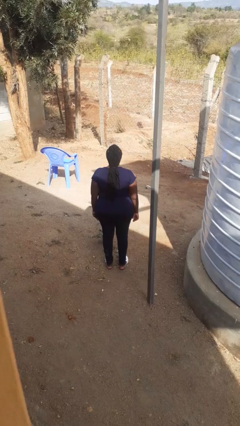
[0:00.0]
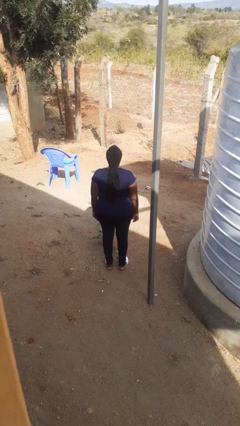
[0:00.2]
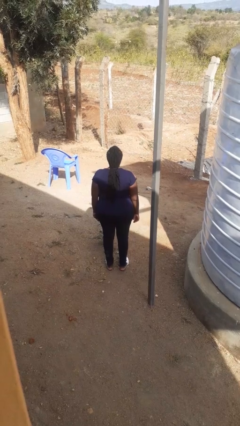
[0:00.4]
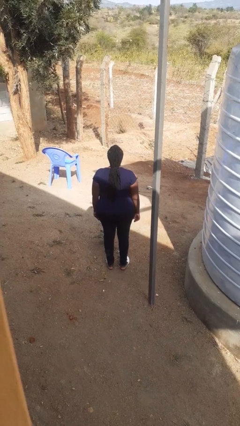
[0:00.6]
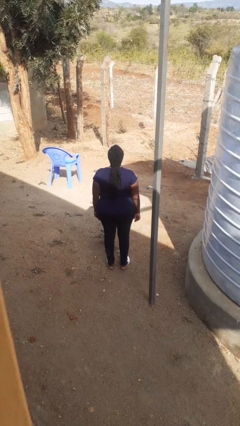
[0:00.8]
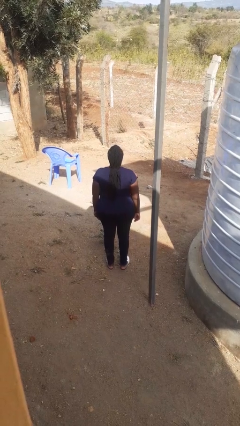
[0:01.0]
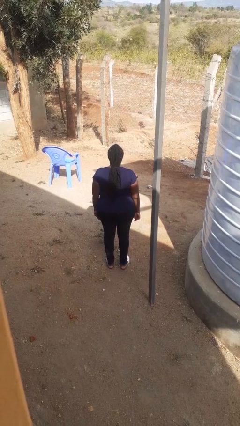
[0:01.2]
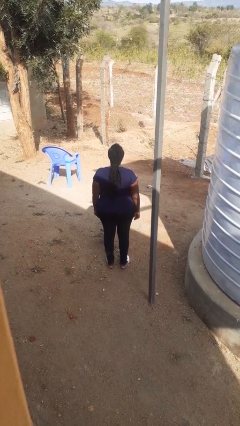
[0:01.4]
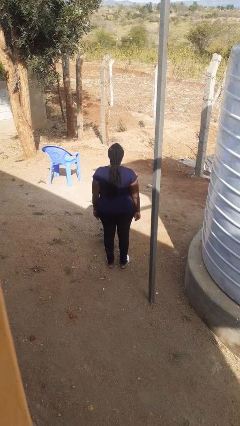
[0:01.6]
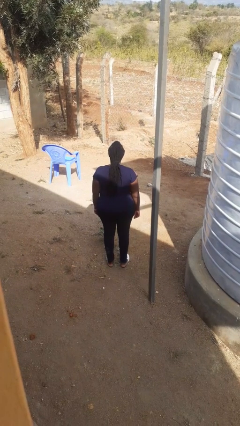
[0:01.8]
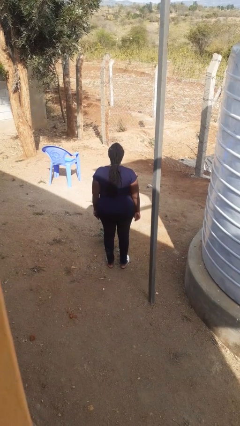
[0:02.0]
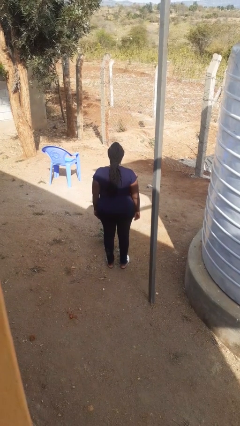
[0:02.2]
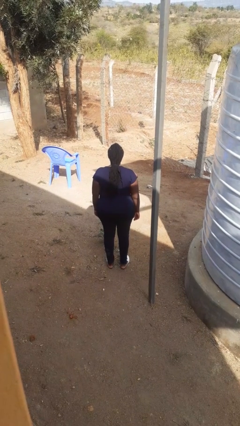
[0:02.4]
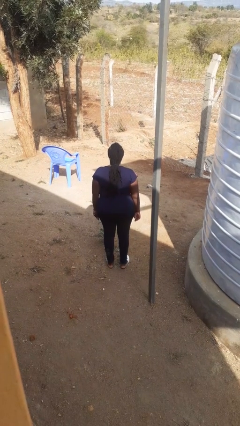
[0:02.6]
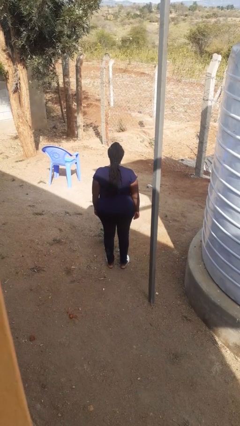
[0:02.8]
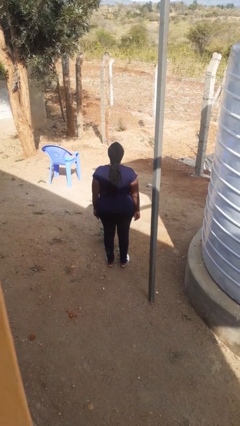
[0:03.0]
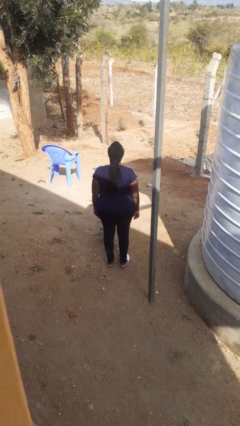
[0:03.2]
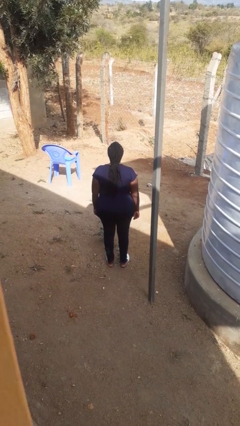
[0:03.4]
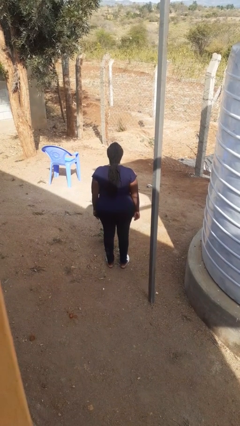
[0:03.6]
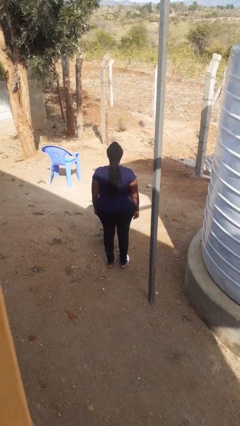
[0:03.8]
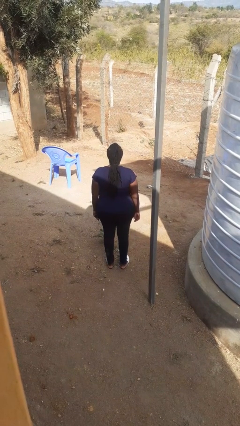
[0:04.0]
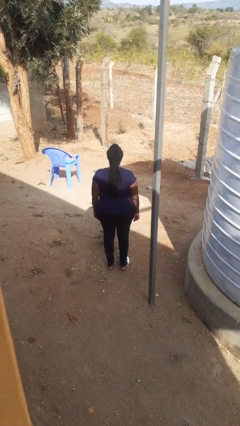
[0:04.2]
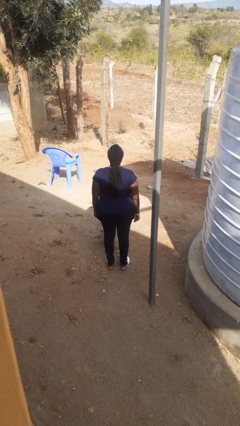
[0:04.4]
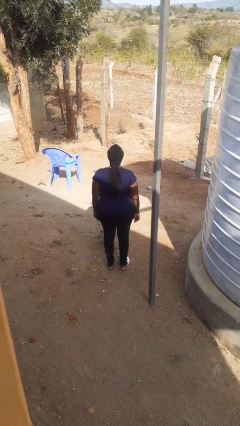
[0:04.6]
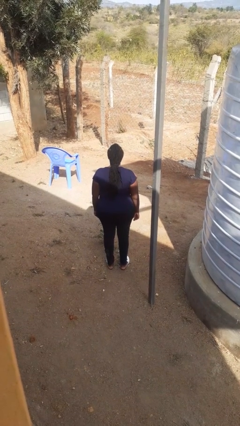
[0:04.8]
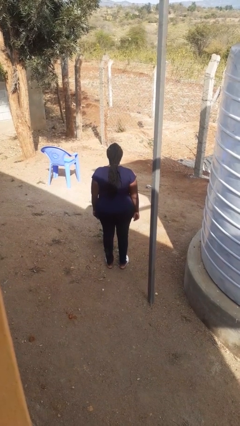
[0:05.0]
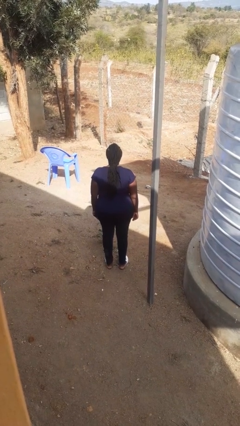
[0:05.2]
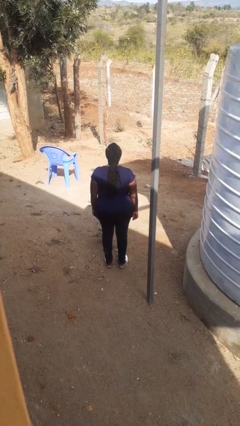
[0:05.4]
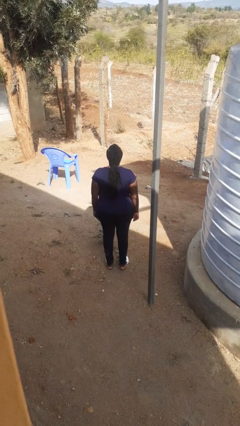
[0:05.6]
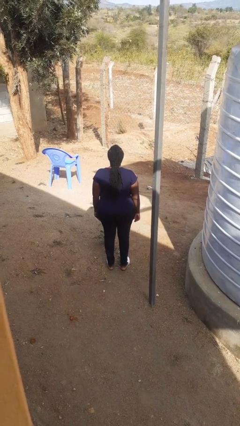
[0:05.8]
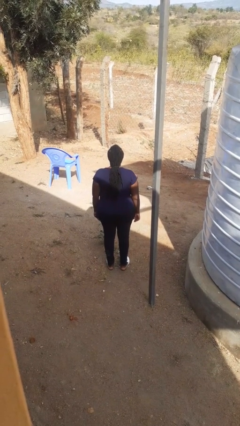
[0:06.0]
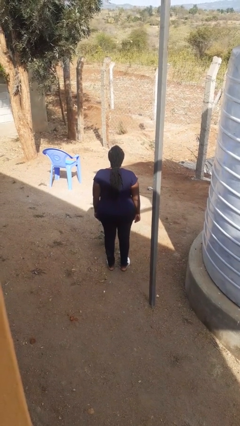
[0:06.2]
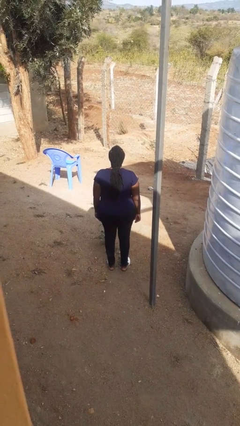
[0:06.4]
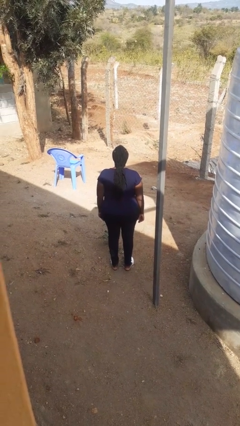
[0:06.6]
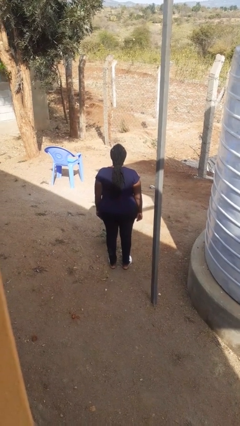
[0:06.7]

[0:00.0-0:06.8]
person nods head

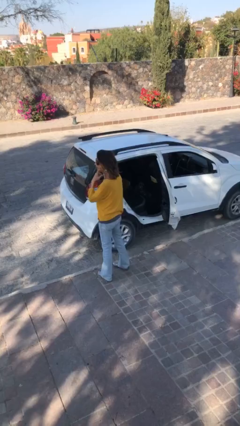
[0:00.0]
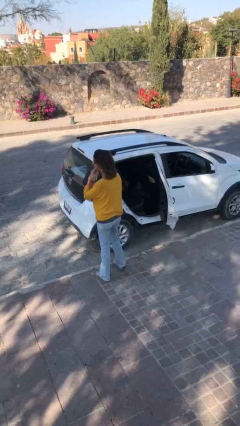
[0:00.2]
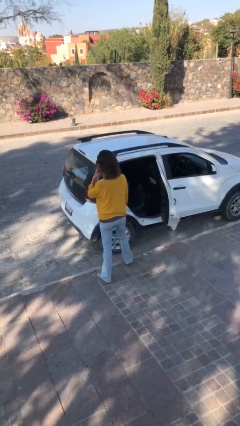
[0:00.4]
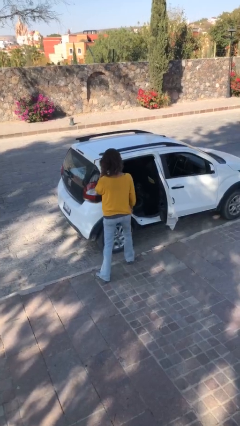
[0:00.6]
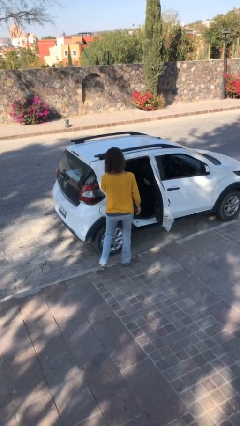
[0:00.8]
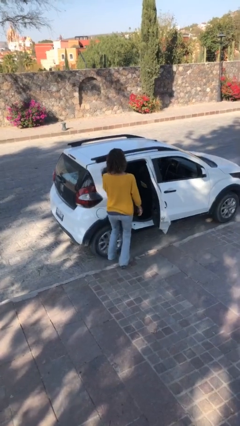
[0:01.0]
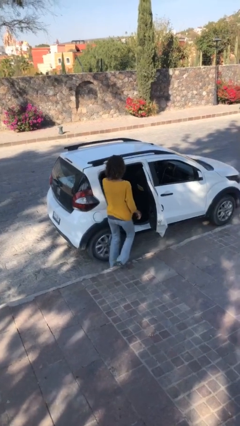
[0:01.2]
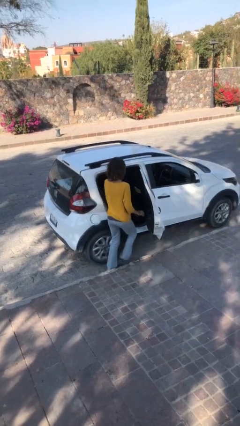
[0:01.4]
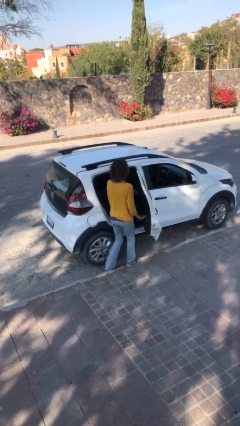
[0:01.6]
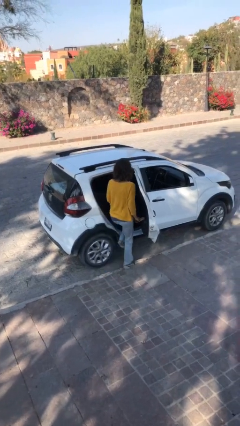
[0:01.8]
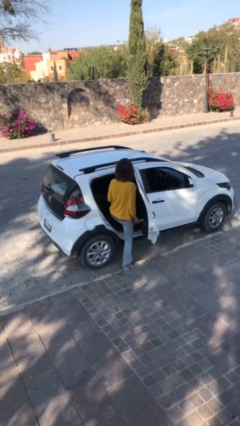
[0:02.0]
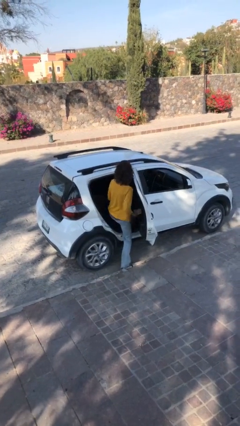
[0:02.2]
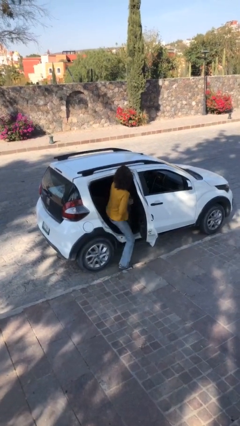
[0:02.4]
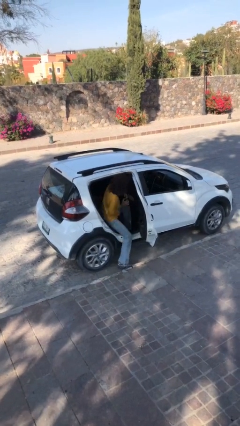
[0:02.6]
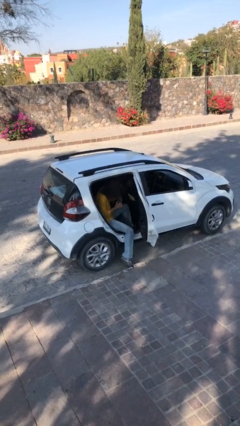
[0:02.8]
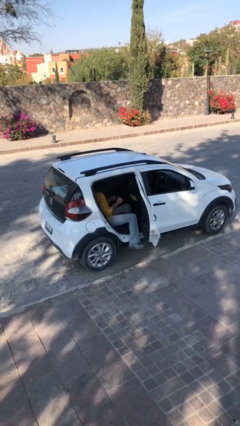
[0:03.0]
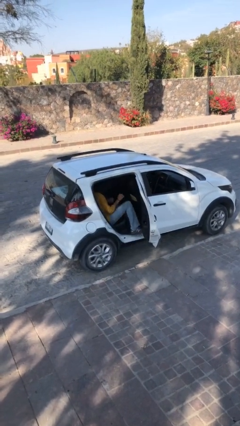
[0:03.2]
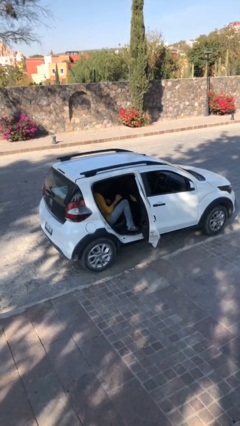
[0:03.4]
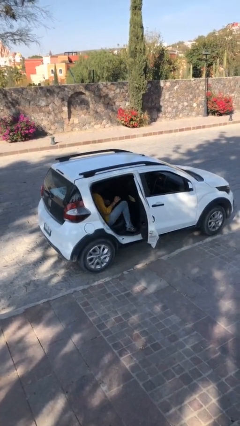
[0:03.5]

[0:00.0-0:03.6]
person enters car

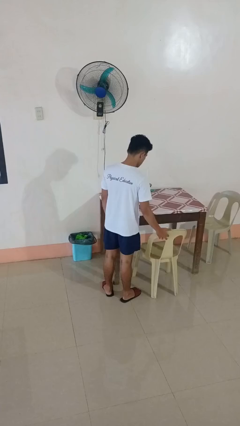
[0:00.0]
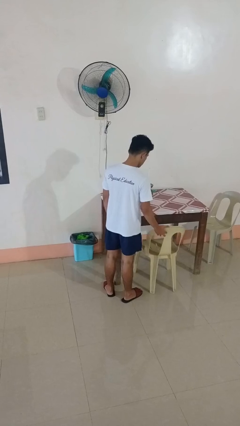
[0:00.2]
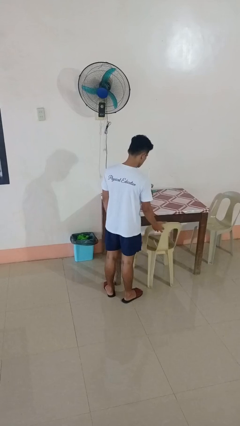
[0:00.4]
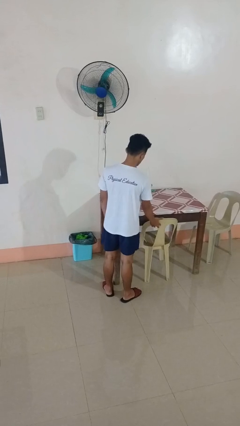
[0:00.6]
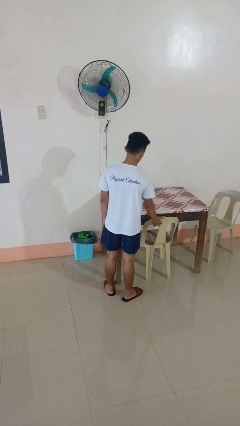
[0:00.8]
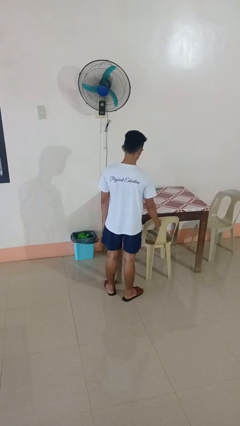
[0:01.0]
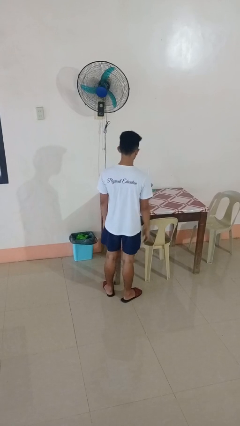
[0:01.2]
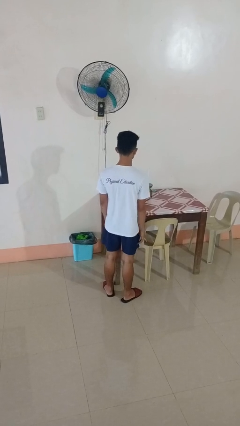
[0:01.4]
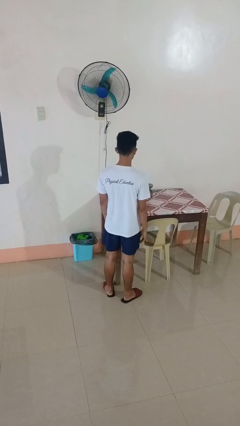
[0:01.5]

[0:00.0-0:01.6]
person pushes in chair

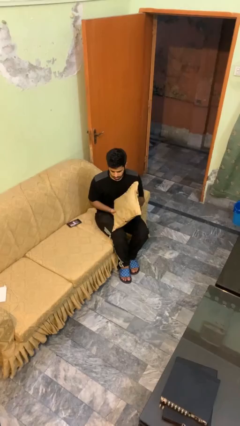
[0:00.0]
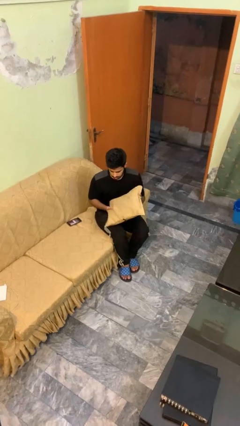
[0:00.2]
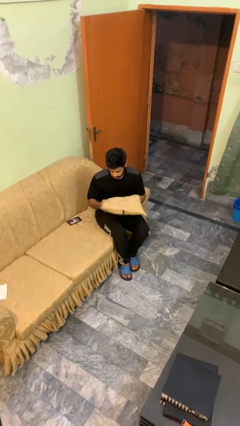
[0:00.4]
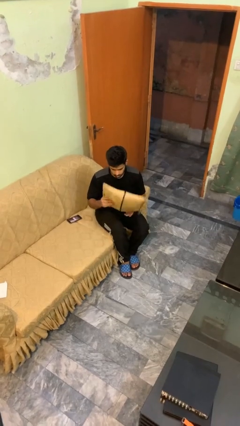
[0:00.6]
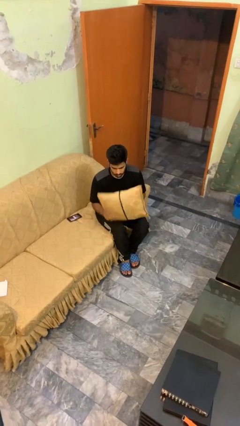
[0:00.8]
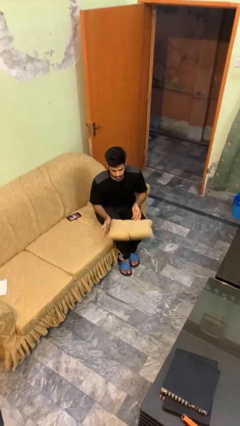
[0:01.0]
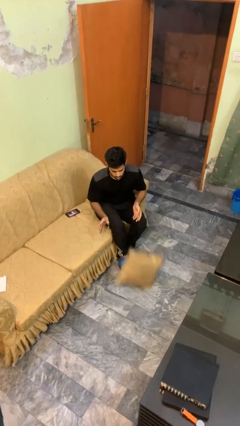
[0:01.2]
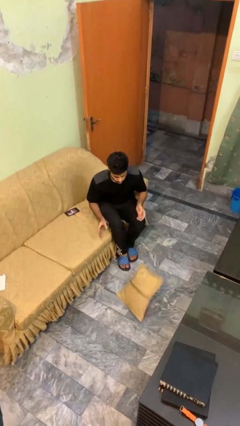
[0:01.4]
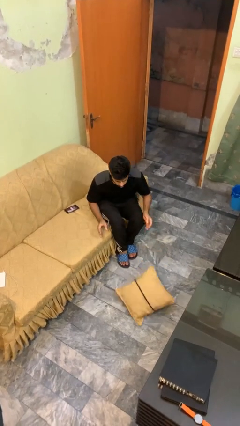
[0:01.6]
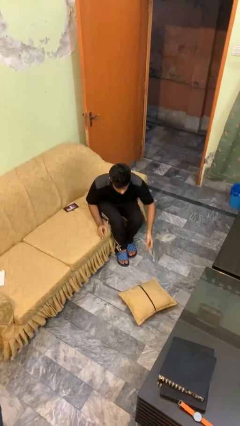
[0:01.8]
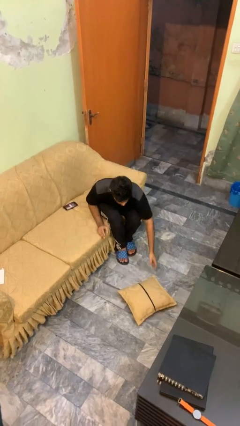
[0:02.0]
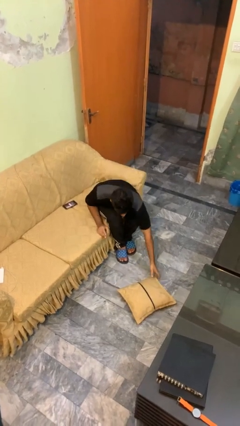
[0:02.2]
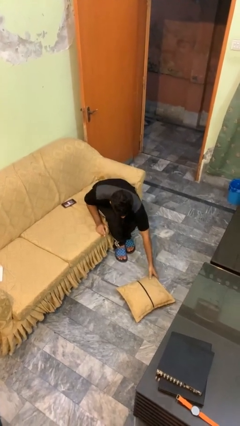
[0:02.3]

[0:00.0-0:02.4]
person drops object

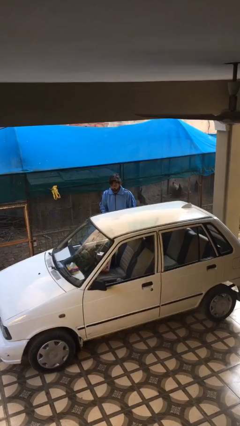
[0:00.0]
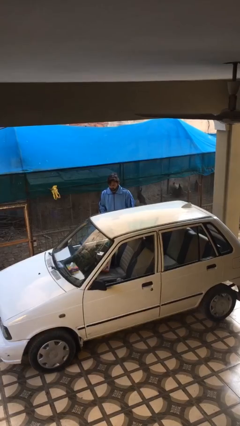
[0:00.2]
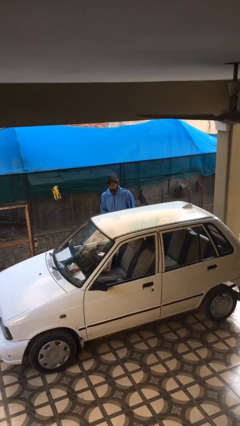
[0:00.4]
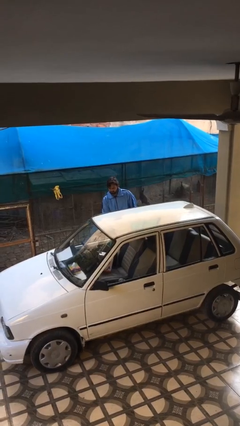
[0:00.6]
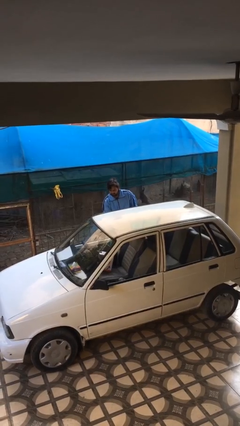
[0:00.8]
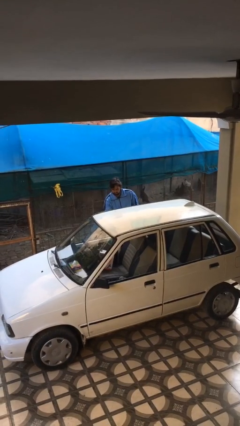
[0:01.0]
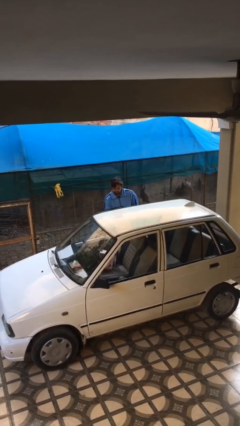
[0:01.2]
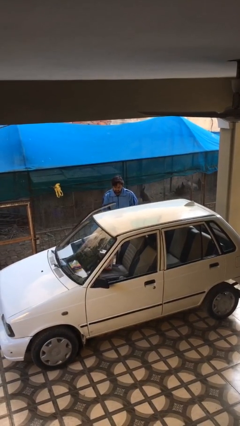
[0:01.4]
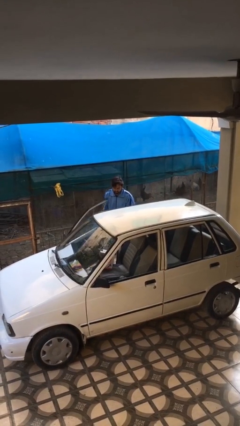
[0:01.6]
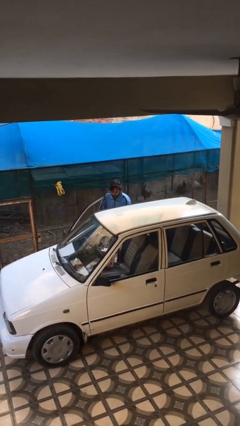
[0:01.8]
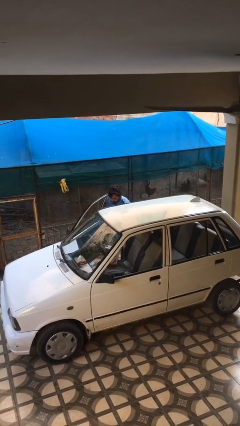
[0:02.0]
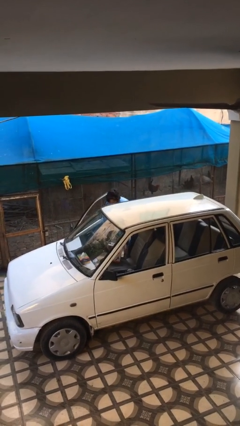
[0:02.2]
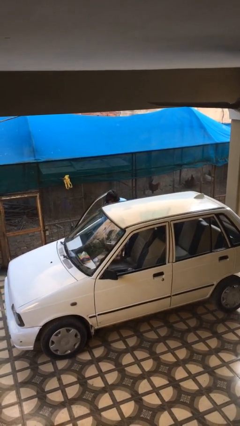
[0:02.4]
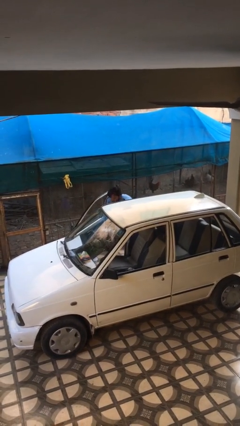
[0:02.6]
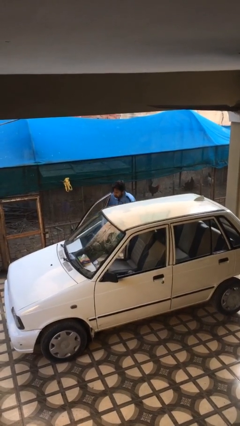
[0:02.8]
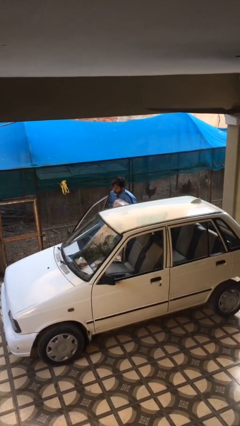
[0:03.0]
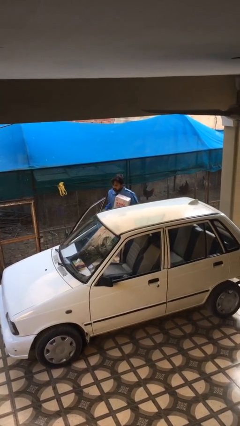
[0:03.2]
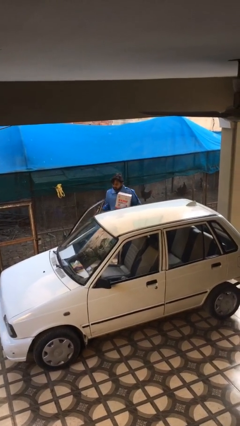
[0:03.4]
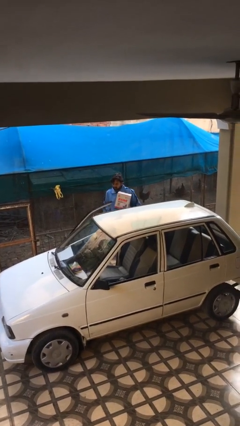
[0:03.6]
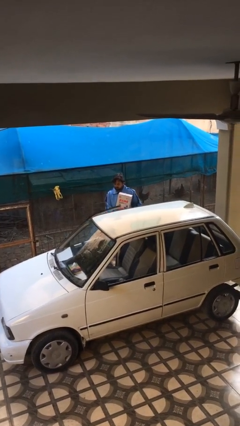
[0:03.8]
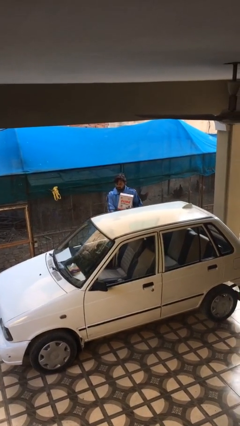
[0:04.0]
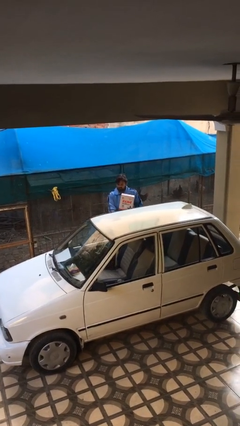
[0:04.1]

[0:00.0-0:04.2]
person unloads car
